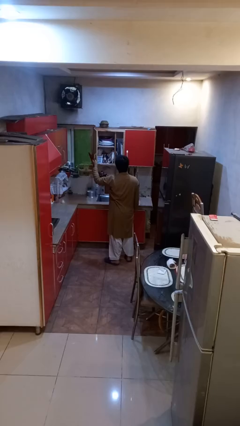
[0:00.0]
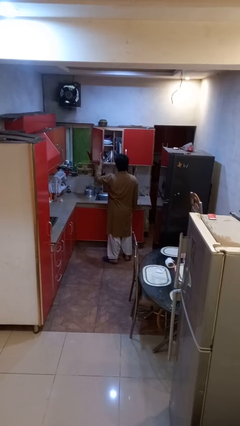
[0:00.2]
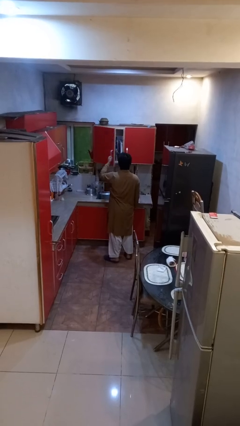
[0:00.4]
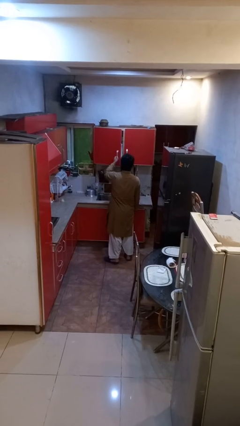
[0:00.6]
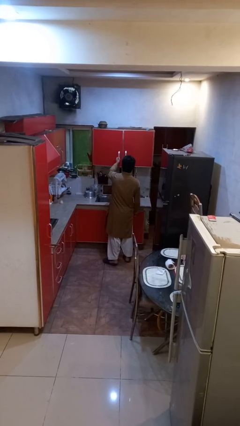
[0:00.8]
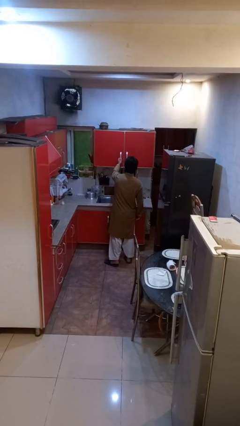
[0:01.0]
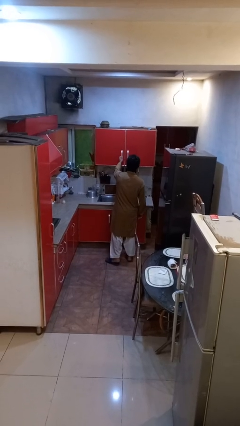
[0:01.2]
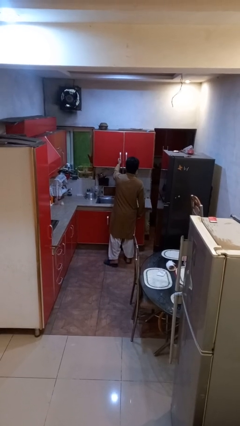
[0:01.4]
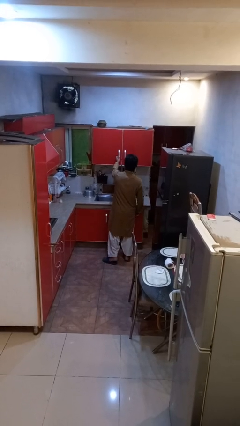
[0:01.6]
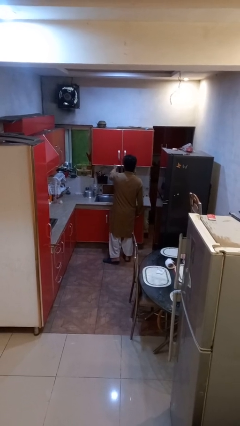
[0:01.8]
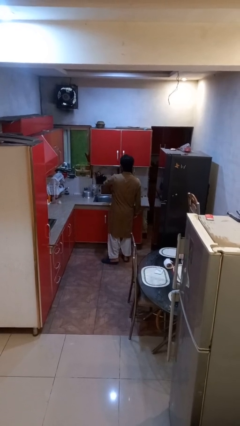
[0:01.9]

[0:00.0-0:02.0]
person closes cabinet

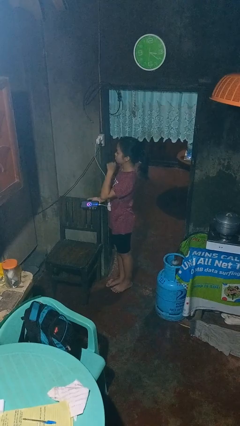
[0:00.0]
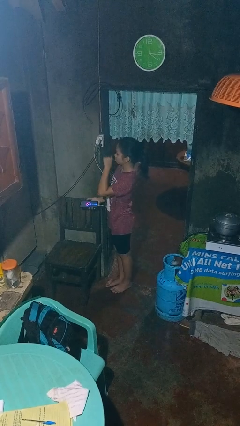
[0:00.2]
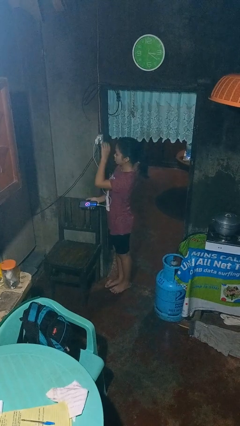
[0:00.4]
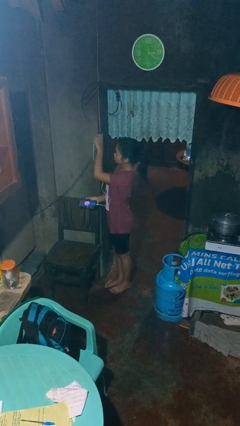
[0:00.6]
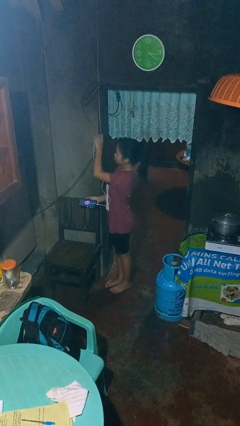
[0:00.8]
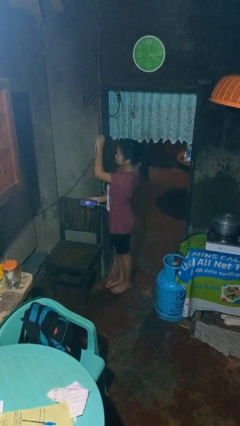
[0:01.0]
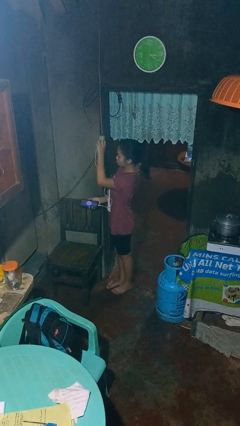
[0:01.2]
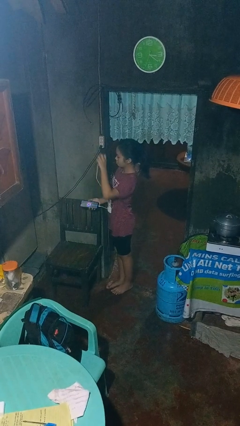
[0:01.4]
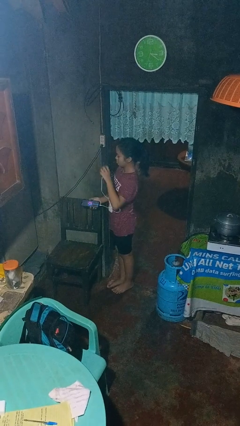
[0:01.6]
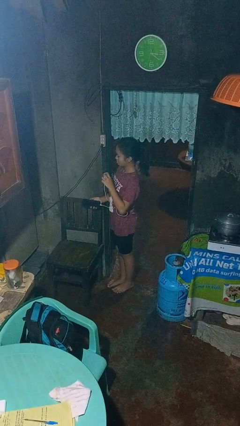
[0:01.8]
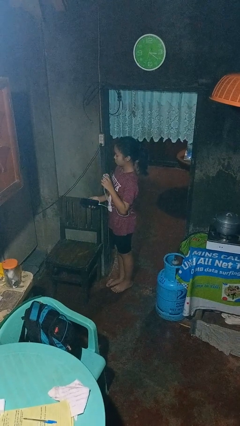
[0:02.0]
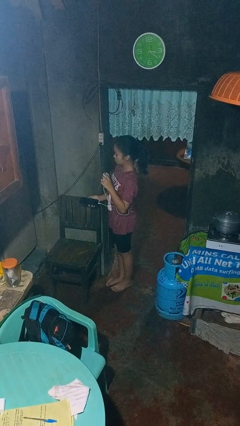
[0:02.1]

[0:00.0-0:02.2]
person unplugs from electrical socket

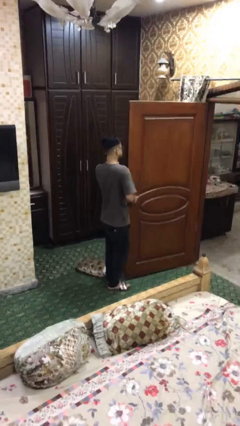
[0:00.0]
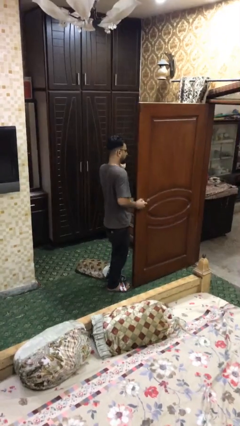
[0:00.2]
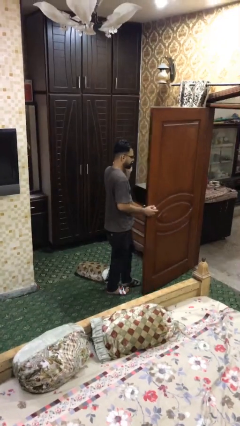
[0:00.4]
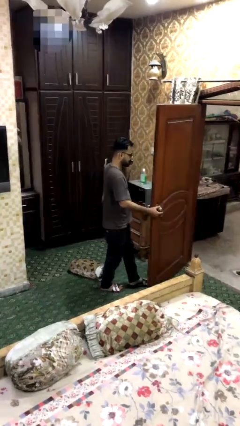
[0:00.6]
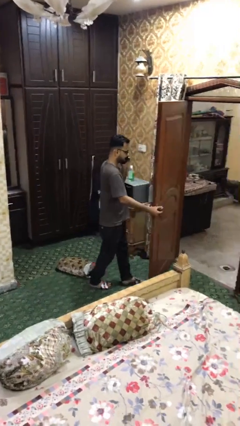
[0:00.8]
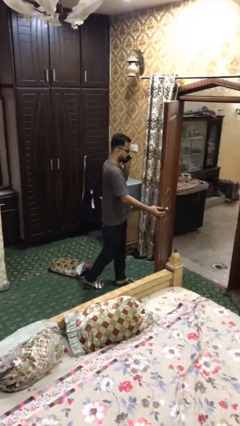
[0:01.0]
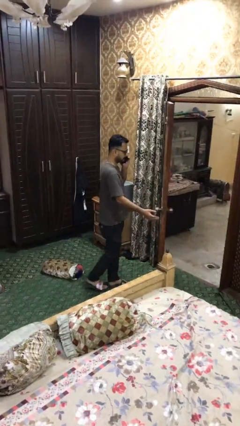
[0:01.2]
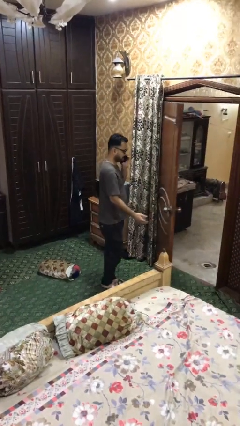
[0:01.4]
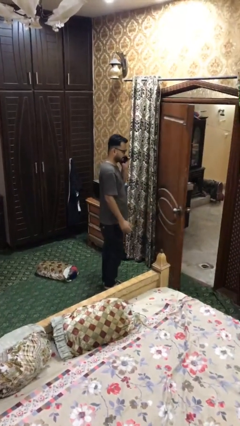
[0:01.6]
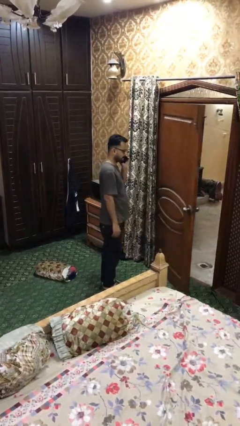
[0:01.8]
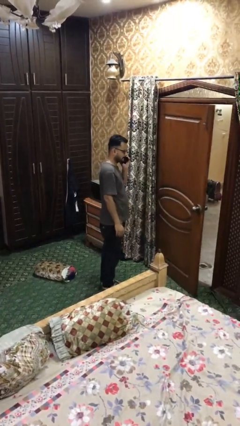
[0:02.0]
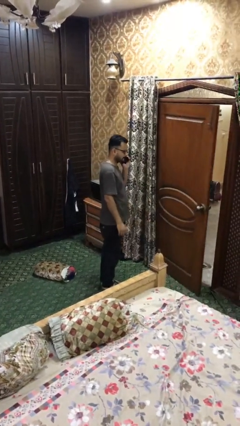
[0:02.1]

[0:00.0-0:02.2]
person closes facility door

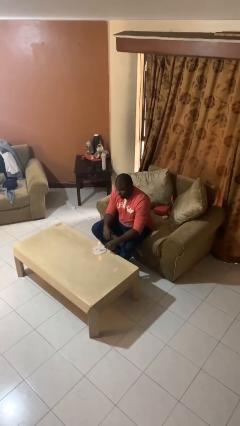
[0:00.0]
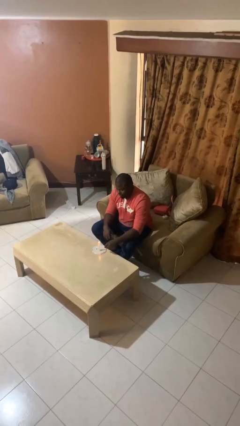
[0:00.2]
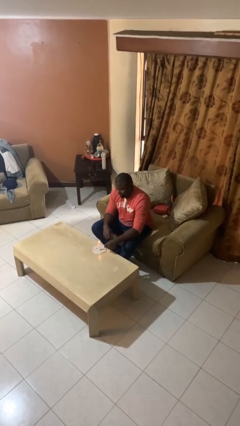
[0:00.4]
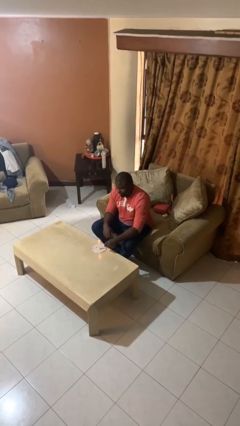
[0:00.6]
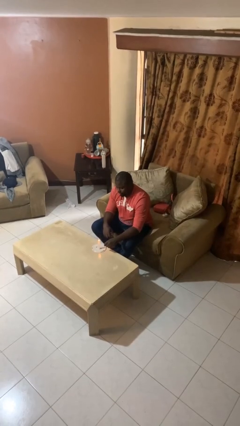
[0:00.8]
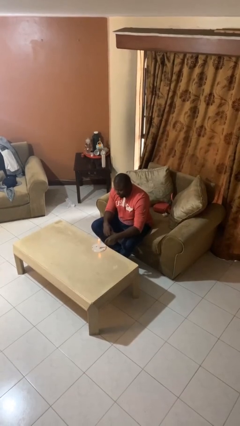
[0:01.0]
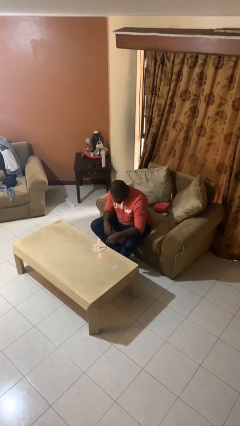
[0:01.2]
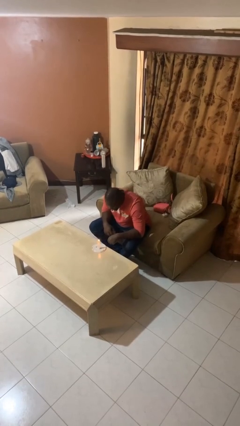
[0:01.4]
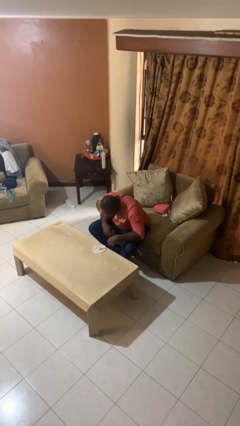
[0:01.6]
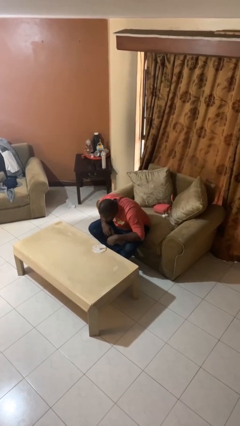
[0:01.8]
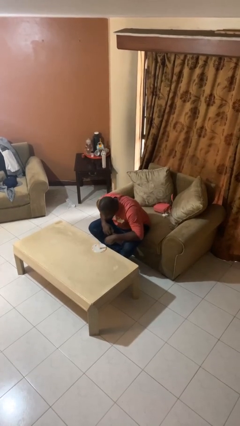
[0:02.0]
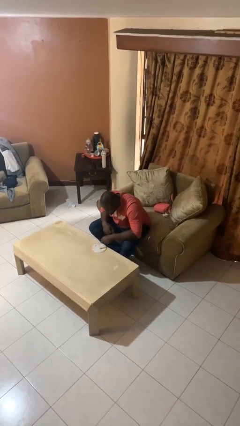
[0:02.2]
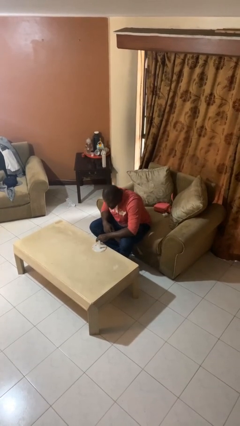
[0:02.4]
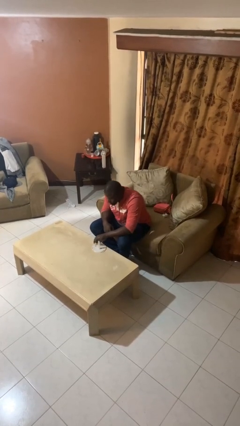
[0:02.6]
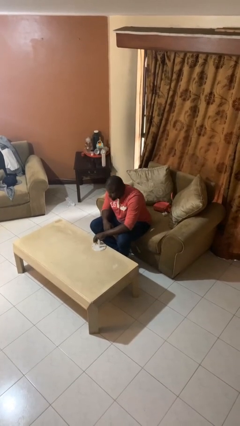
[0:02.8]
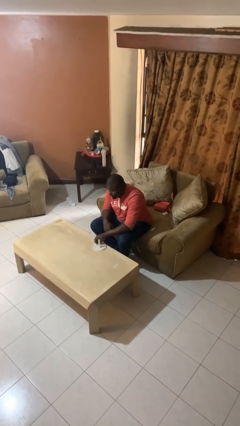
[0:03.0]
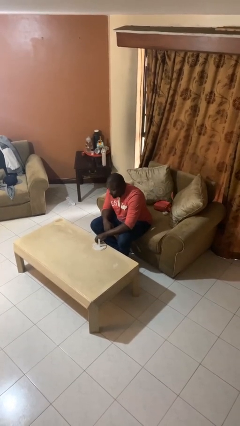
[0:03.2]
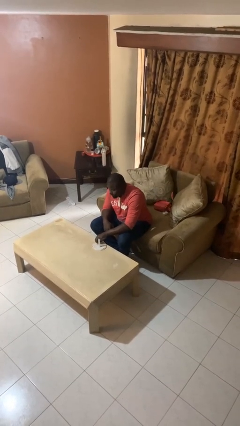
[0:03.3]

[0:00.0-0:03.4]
person extinguishes candle

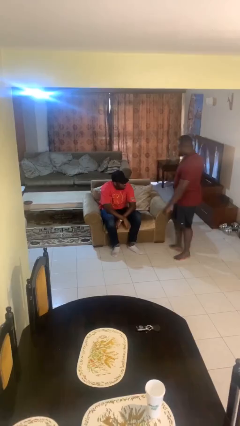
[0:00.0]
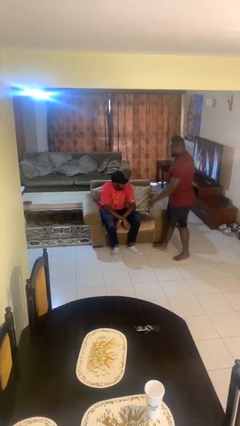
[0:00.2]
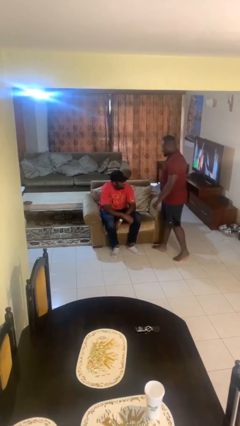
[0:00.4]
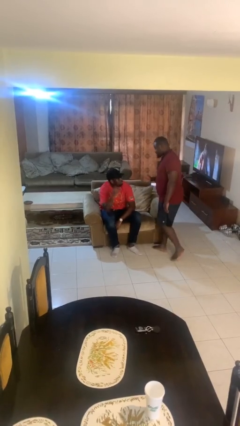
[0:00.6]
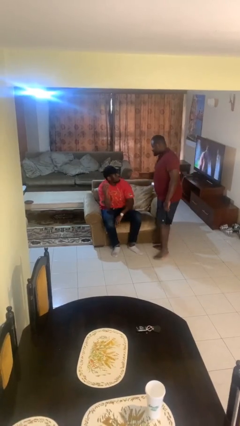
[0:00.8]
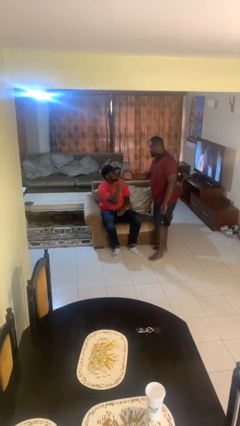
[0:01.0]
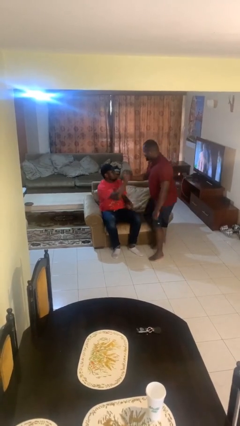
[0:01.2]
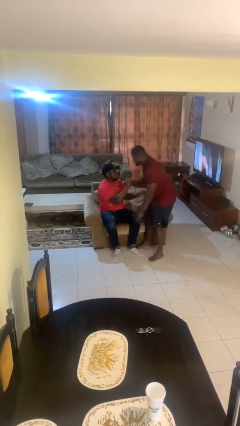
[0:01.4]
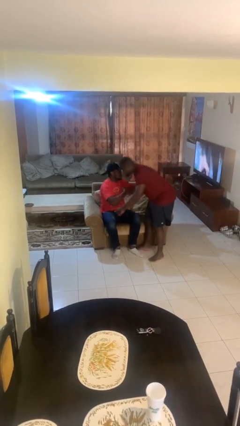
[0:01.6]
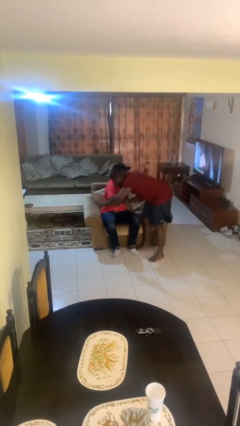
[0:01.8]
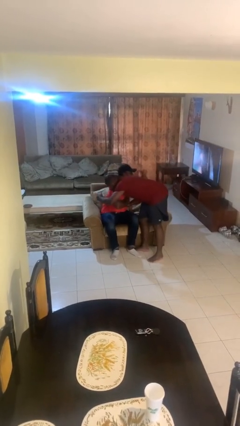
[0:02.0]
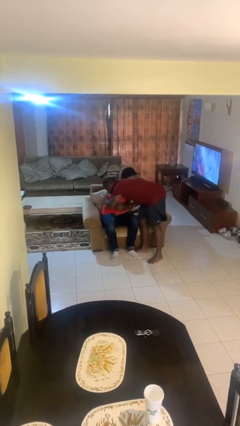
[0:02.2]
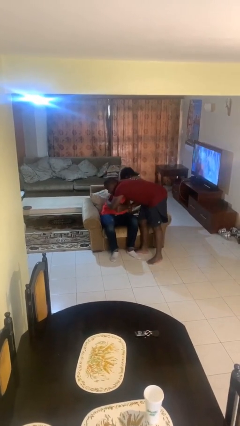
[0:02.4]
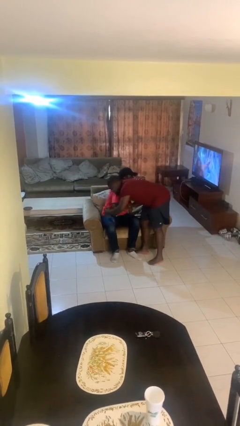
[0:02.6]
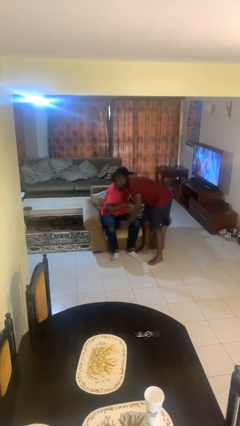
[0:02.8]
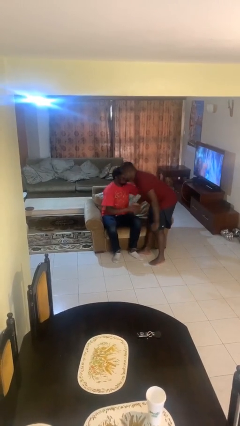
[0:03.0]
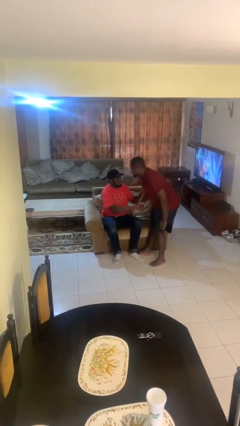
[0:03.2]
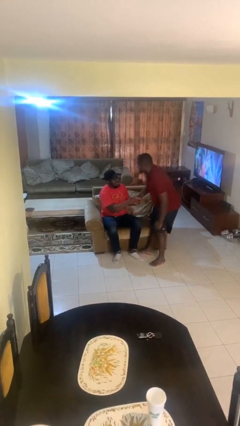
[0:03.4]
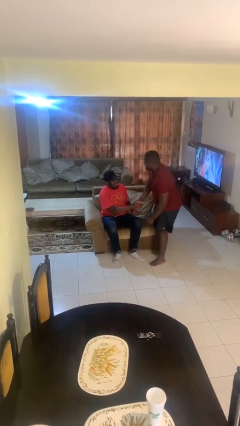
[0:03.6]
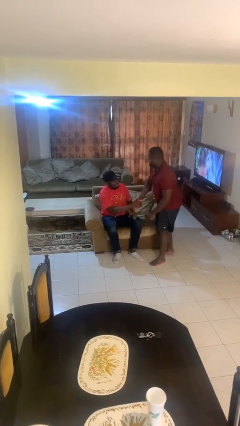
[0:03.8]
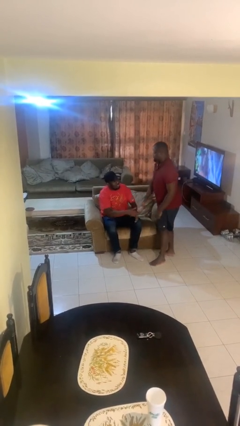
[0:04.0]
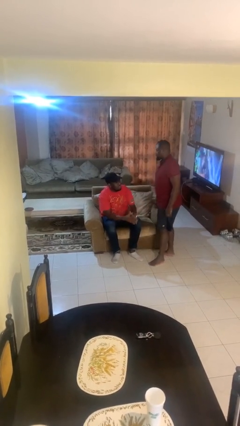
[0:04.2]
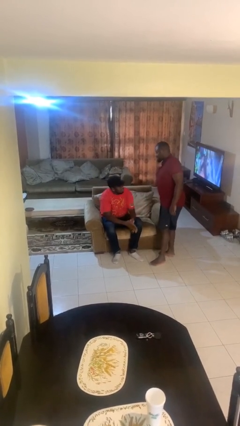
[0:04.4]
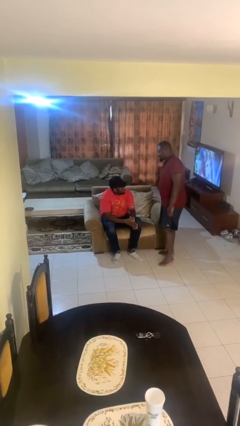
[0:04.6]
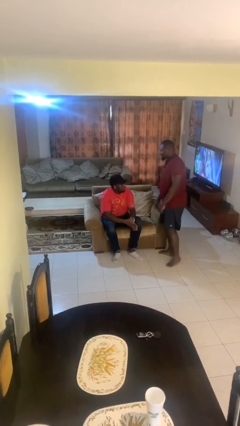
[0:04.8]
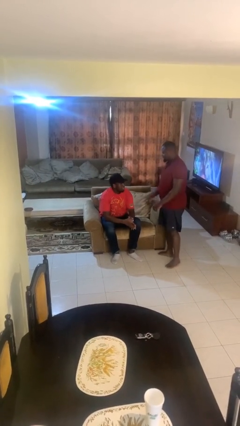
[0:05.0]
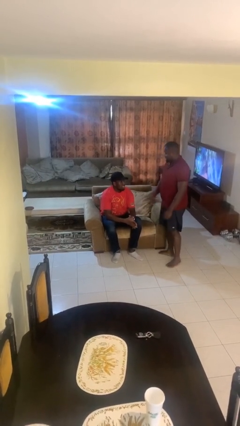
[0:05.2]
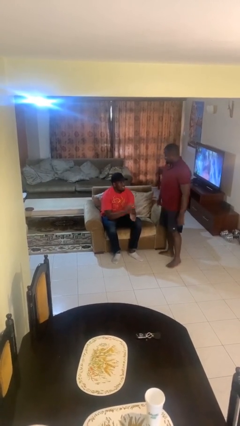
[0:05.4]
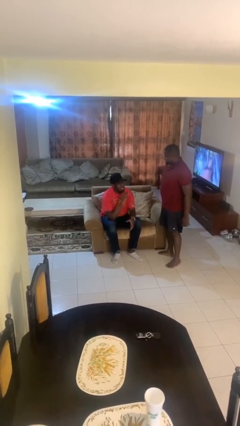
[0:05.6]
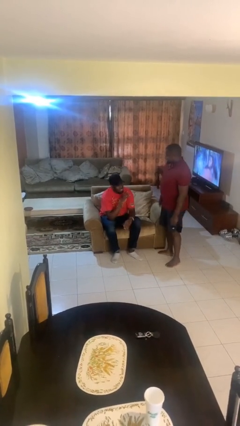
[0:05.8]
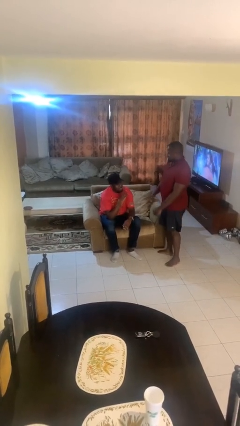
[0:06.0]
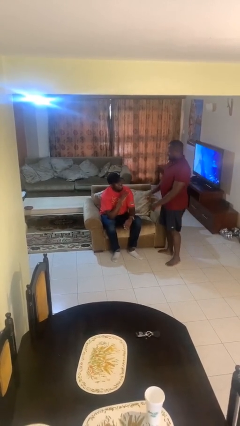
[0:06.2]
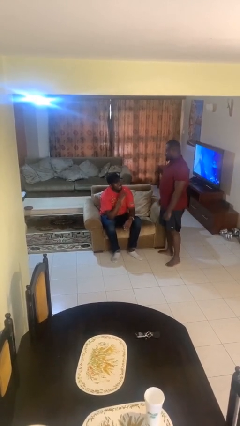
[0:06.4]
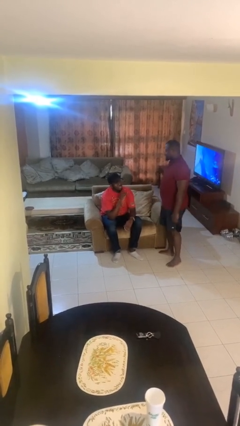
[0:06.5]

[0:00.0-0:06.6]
person embraces person

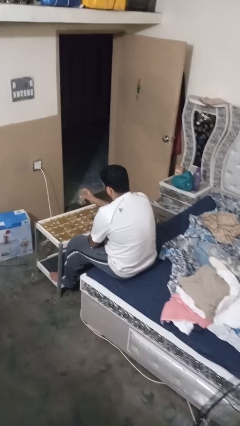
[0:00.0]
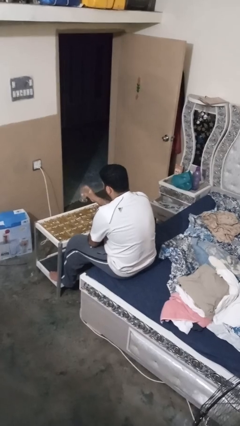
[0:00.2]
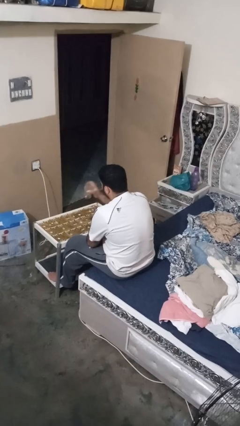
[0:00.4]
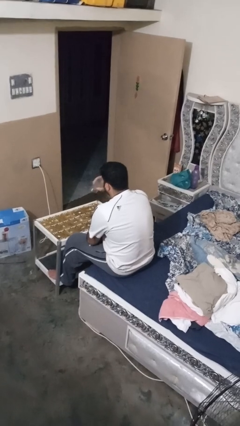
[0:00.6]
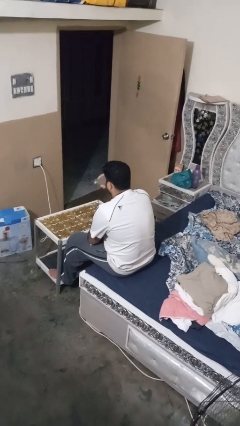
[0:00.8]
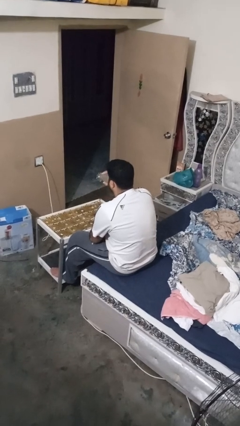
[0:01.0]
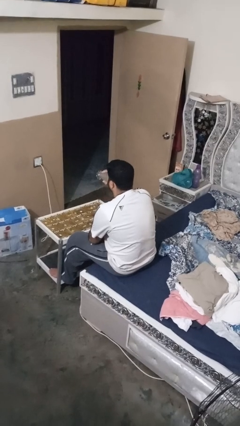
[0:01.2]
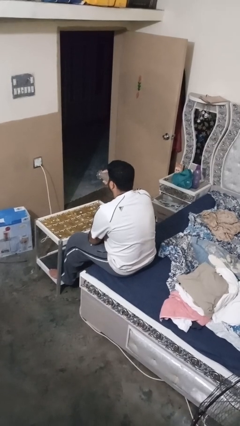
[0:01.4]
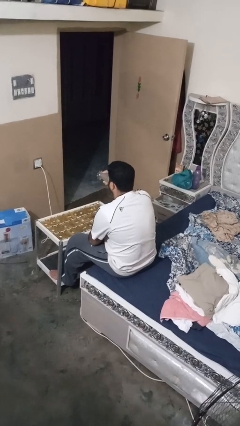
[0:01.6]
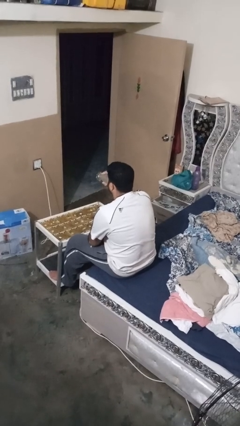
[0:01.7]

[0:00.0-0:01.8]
person drinks from shotglass
